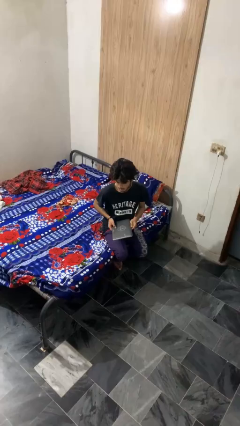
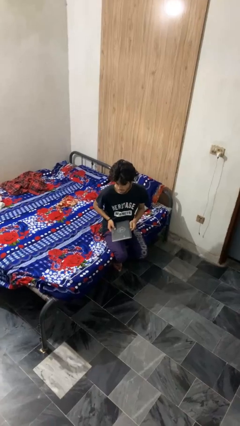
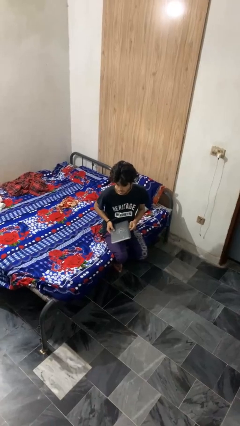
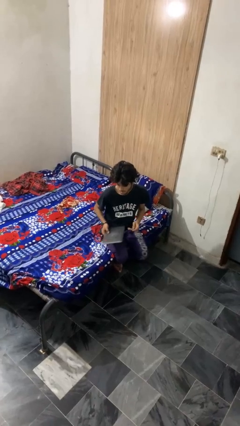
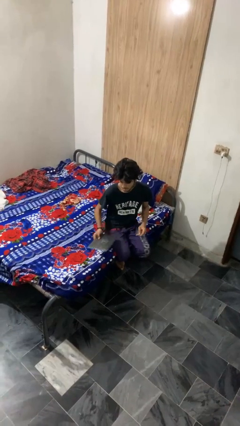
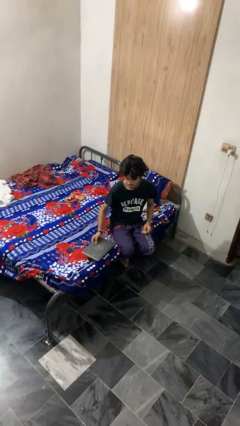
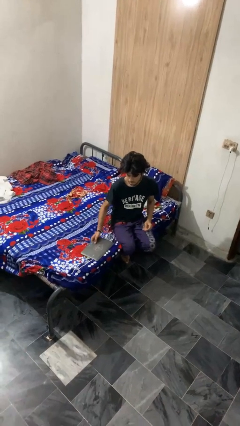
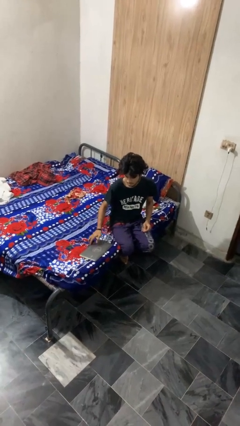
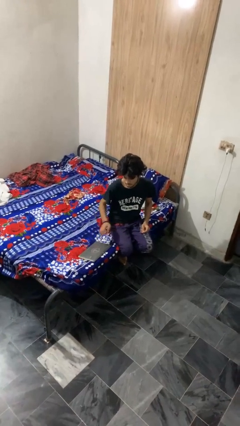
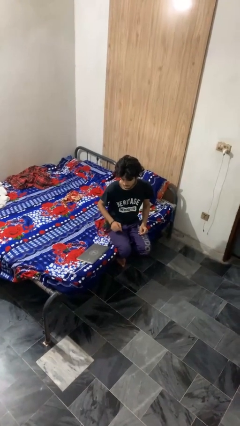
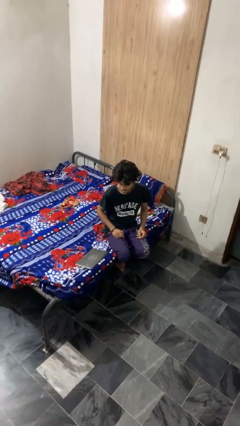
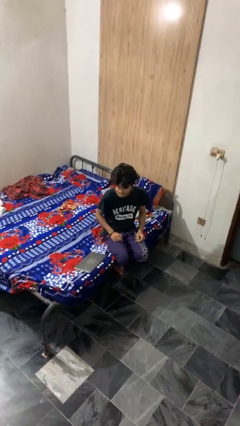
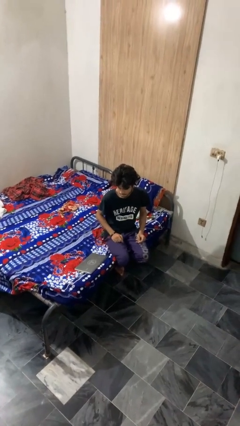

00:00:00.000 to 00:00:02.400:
person puts down object on bed

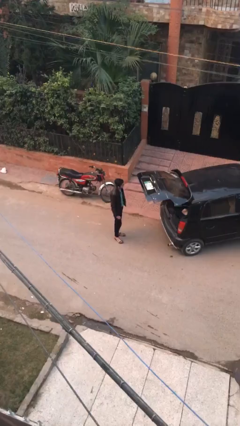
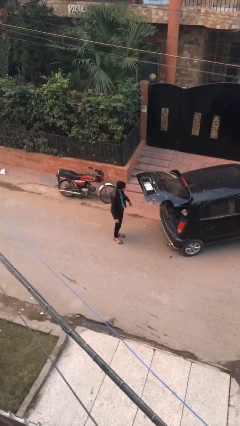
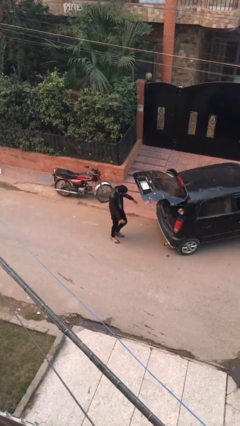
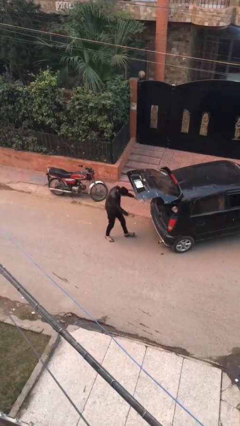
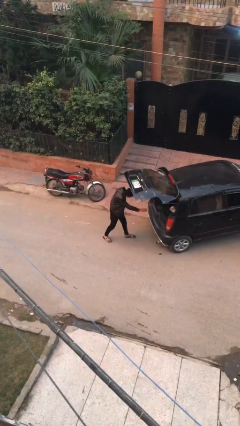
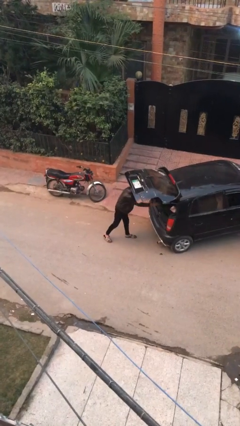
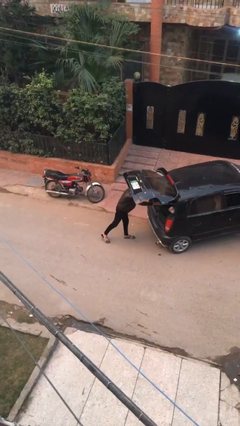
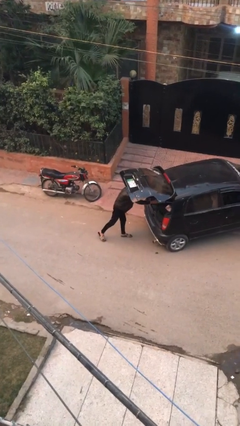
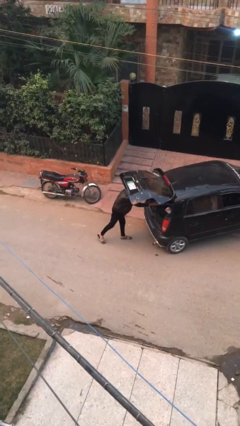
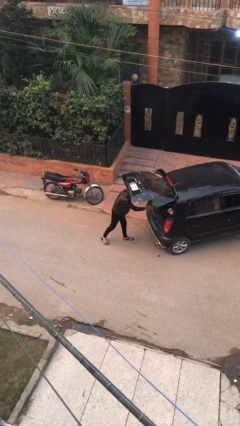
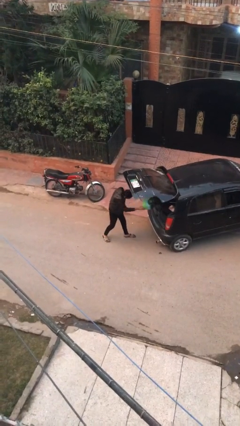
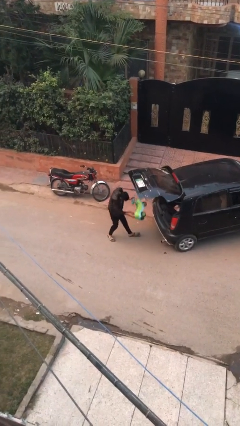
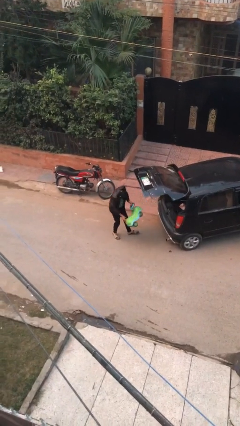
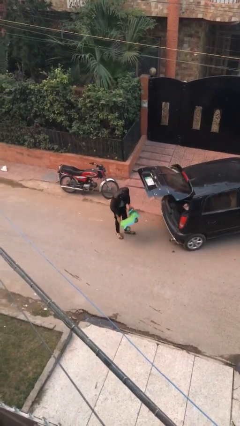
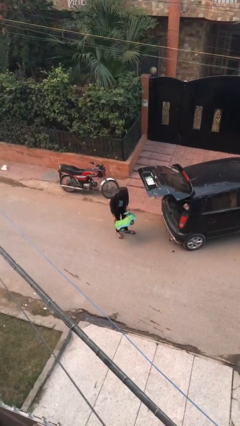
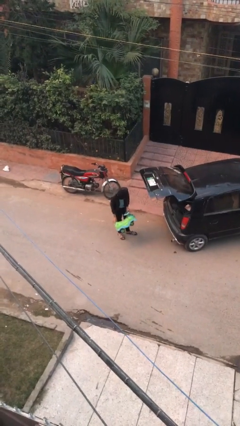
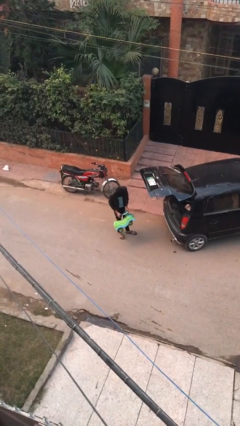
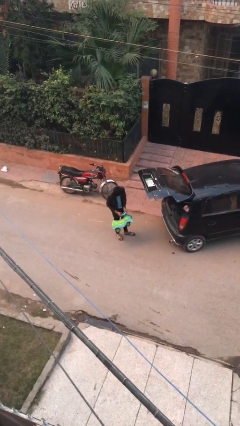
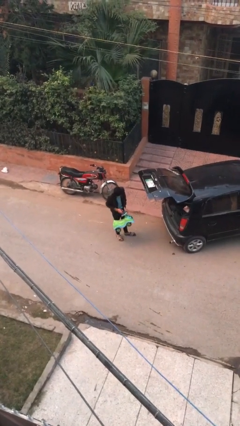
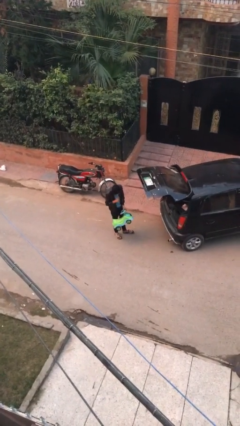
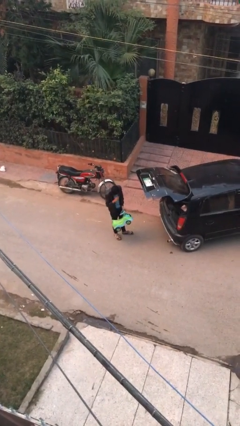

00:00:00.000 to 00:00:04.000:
person unloads car

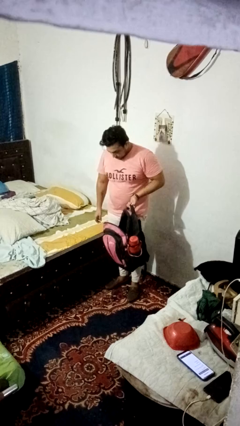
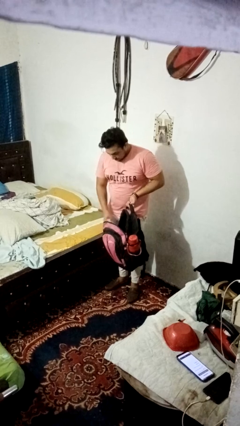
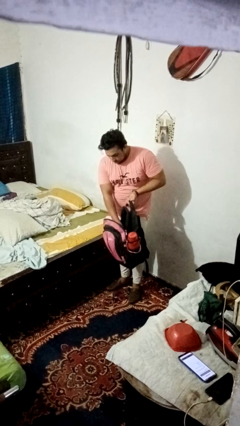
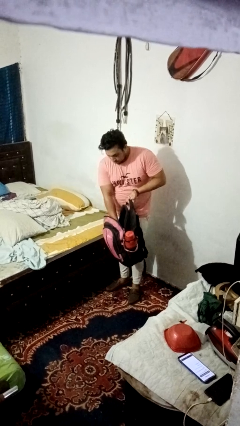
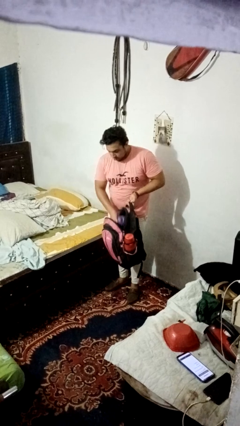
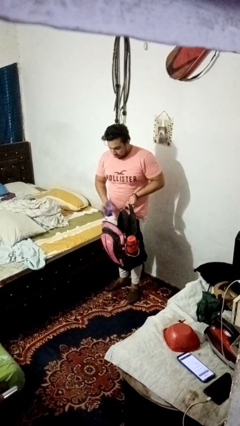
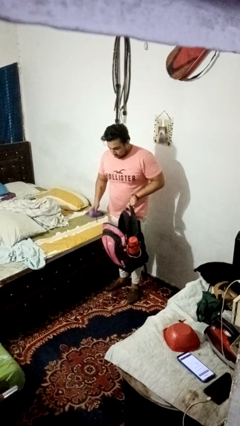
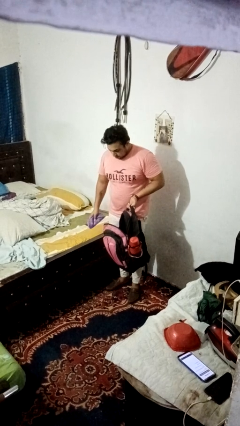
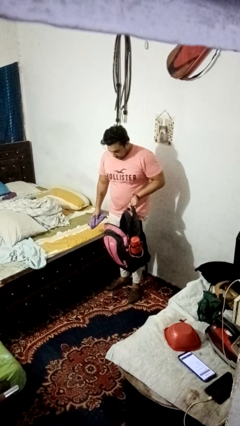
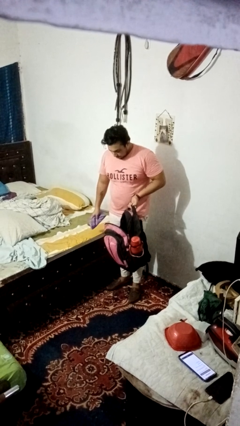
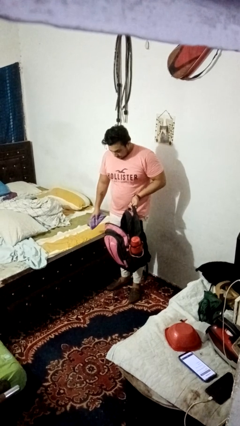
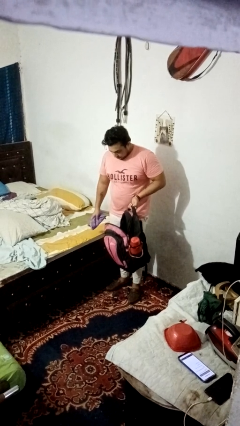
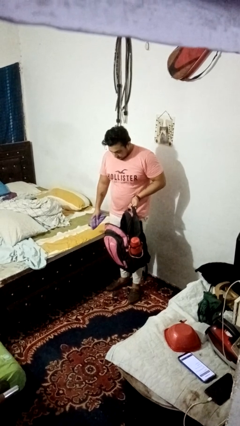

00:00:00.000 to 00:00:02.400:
person takes object from bag

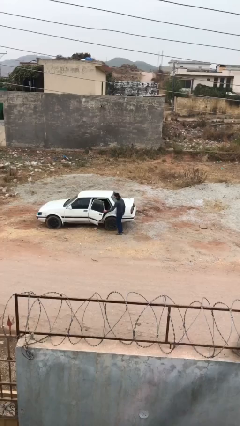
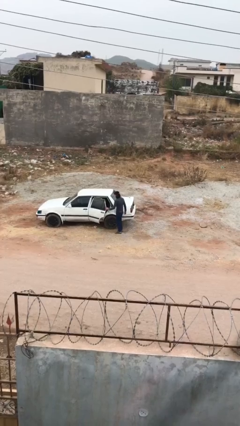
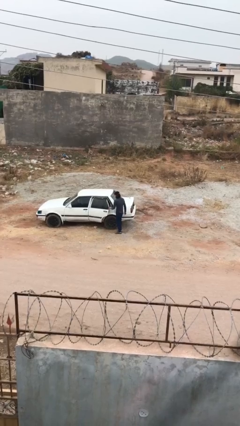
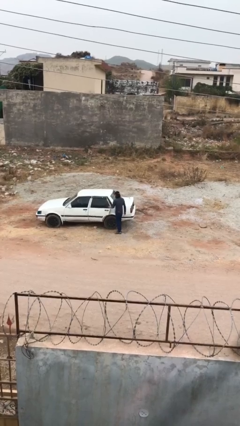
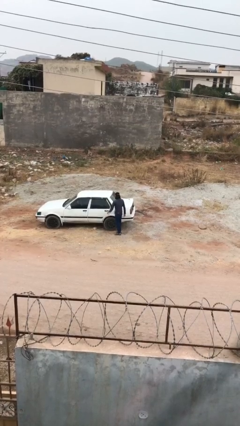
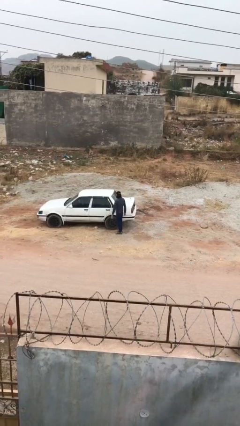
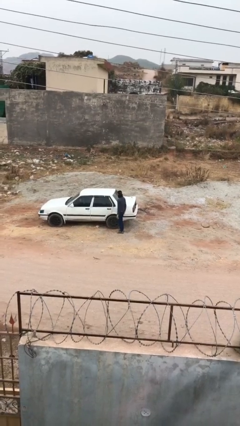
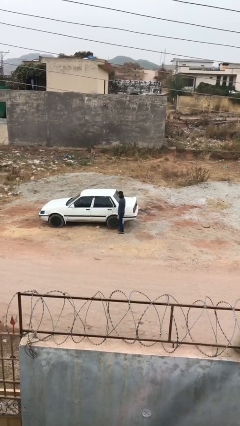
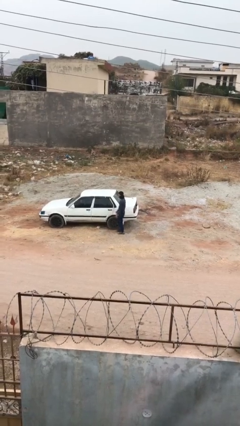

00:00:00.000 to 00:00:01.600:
person closes car door

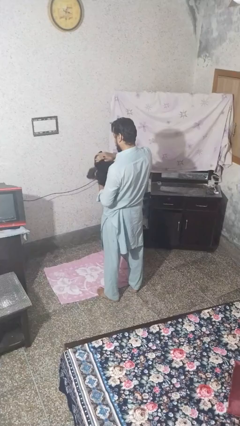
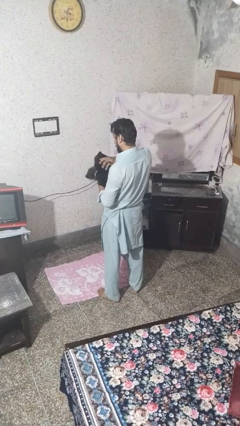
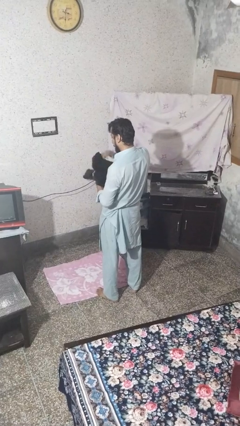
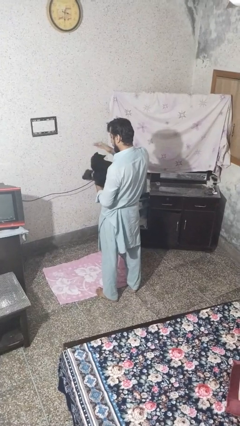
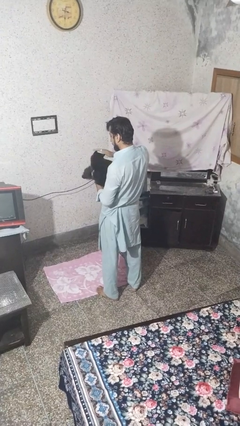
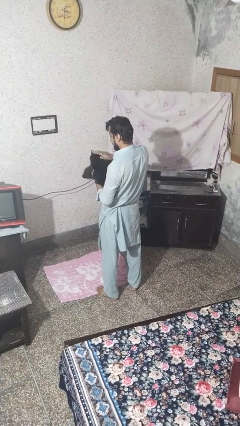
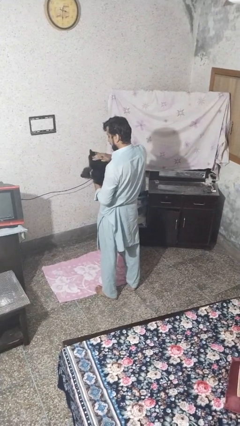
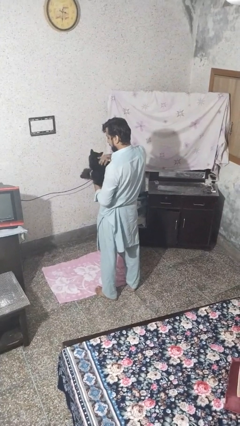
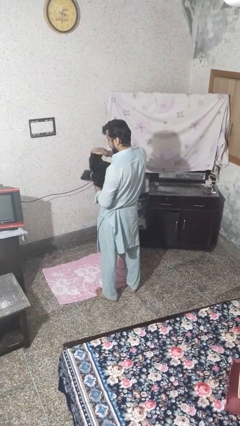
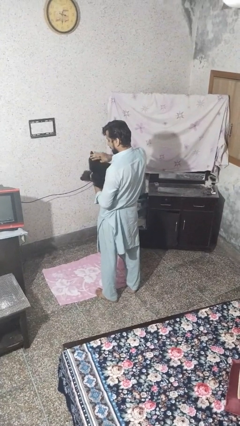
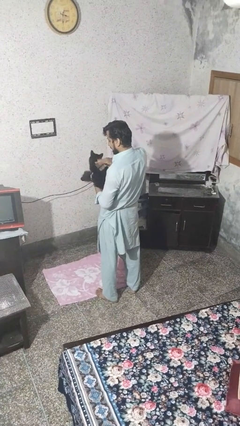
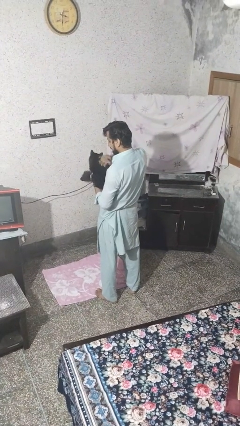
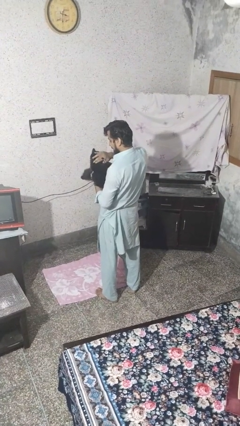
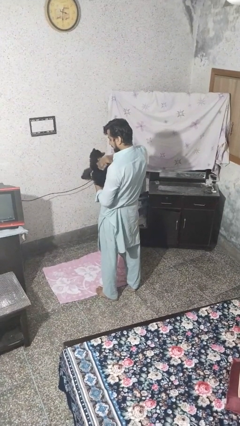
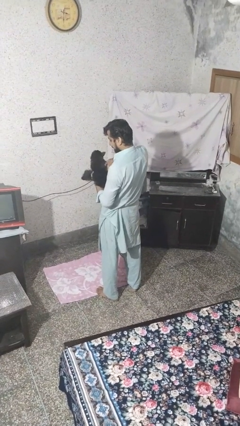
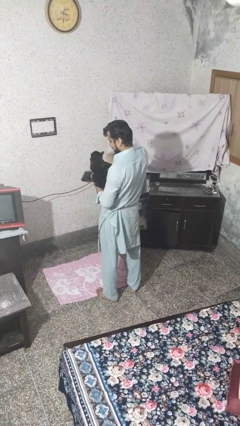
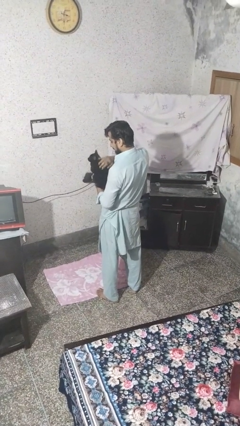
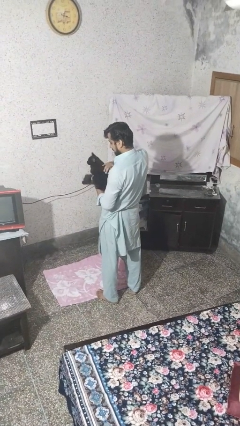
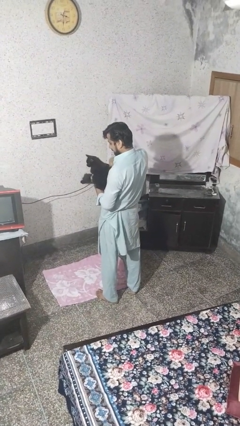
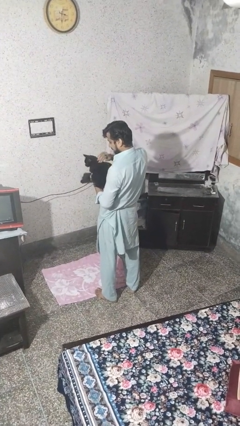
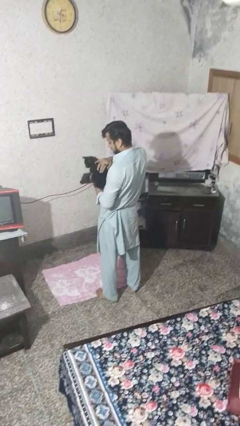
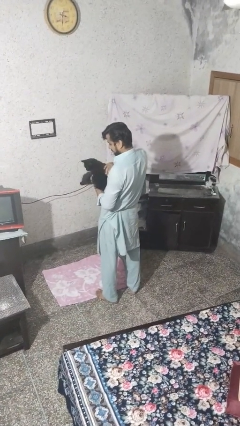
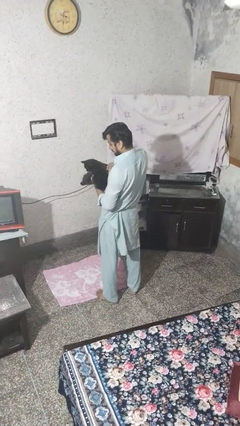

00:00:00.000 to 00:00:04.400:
person pets cat

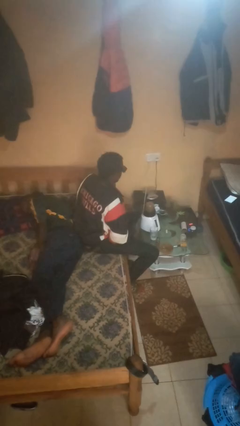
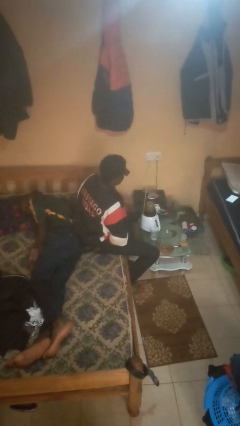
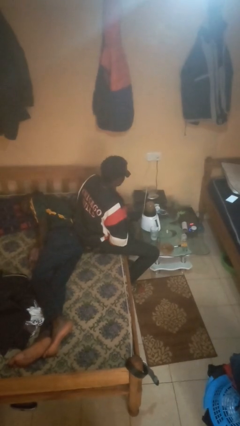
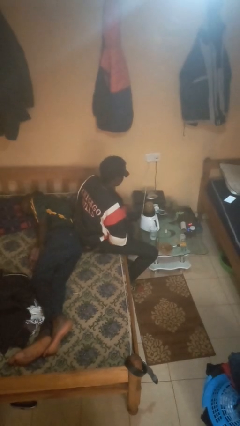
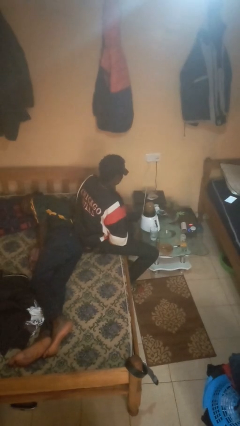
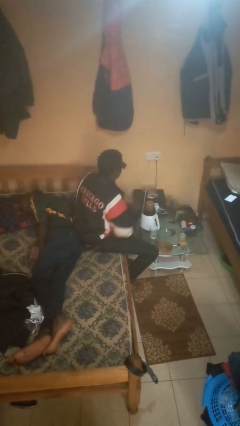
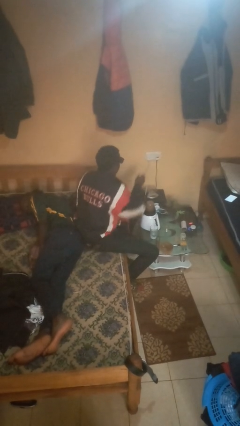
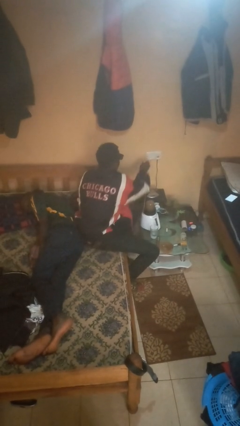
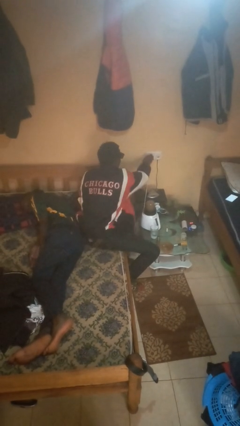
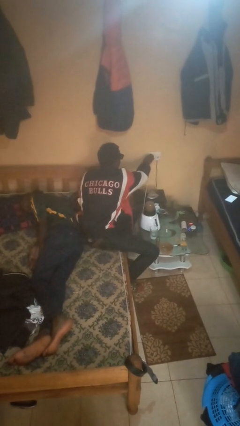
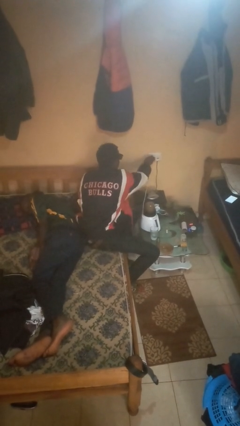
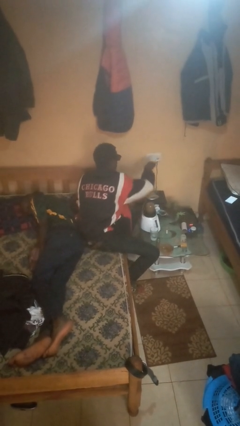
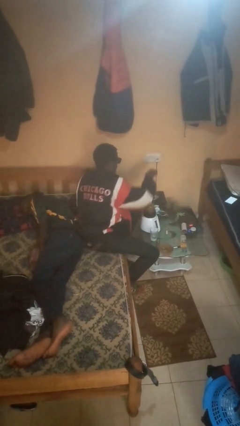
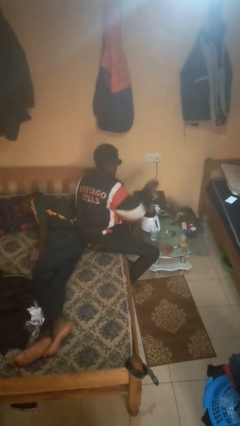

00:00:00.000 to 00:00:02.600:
person unplugs from electrical socket
